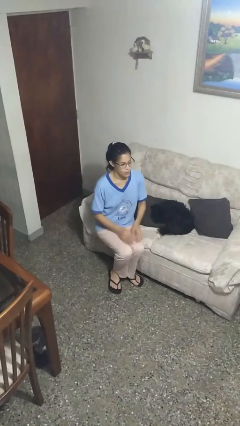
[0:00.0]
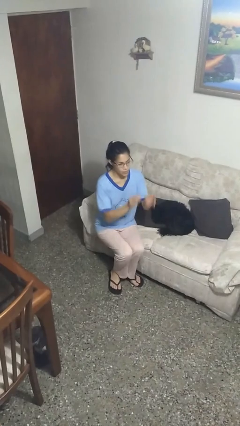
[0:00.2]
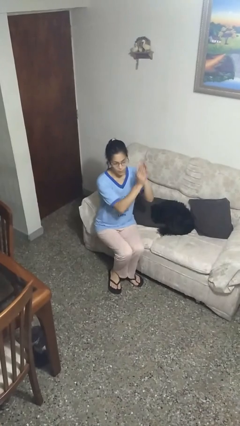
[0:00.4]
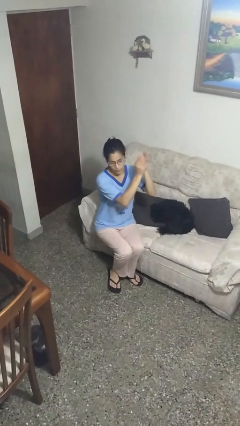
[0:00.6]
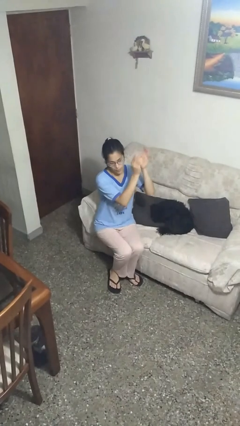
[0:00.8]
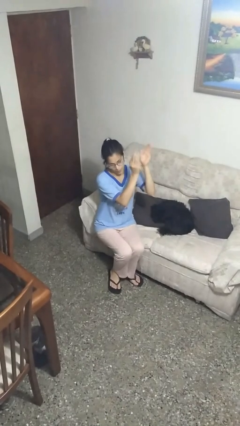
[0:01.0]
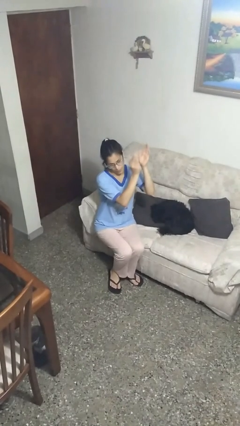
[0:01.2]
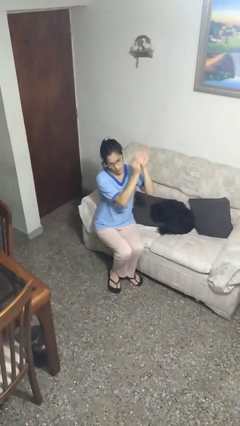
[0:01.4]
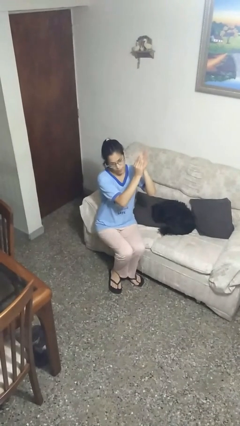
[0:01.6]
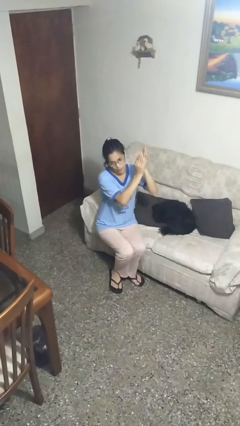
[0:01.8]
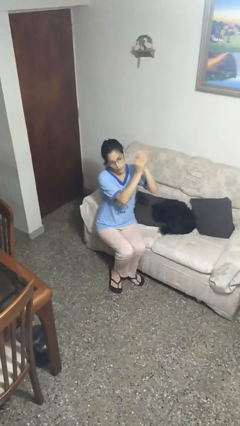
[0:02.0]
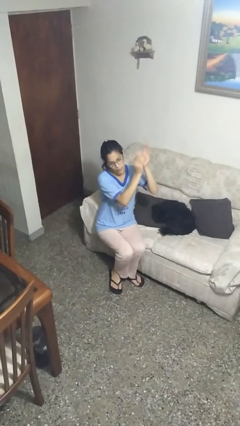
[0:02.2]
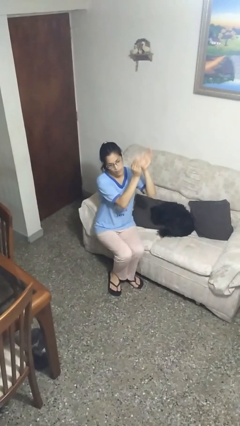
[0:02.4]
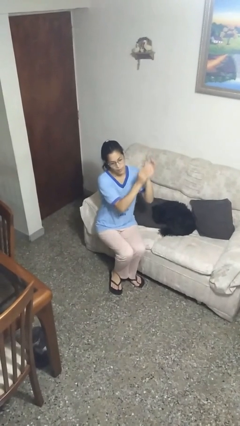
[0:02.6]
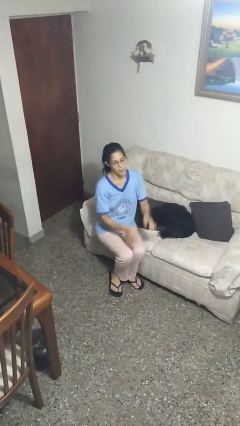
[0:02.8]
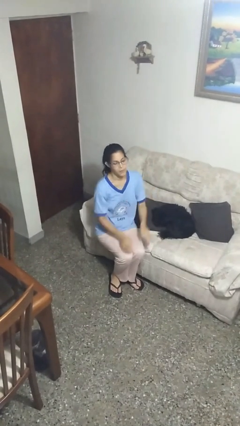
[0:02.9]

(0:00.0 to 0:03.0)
person claps hands

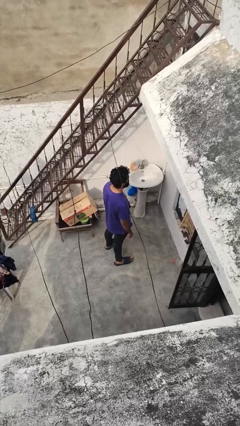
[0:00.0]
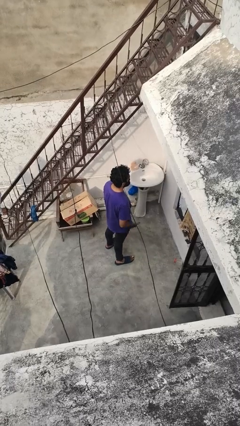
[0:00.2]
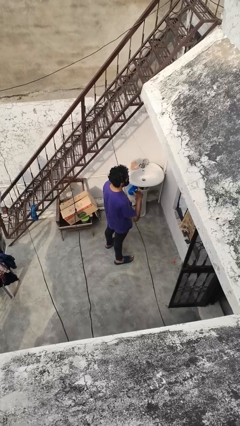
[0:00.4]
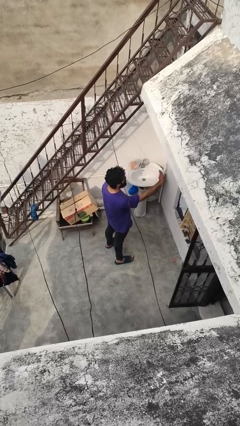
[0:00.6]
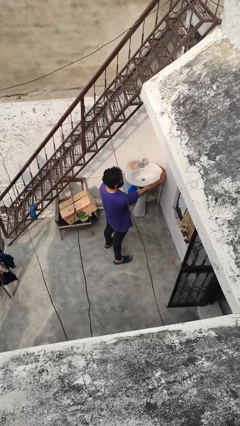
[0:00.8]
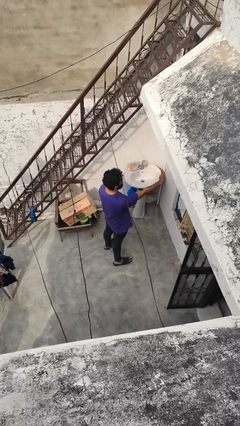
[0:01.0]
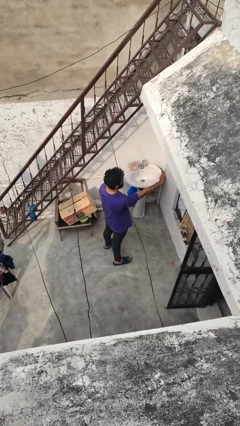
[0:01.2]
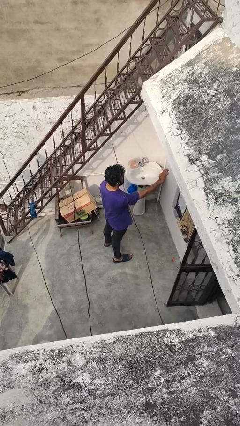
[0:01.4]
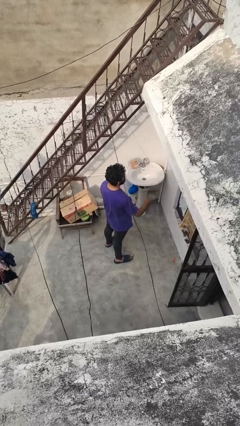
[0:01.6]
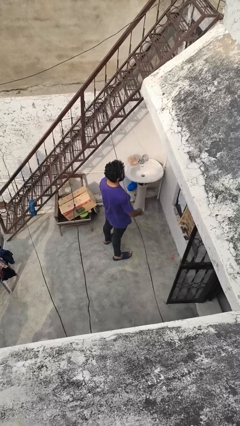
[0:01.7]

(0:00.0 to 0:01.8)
person gestures stop

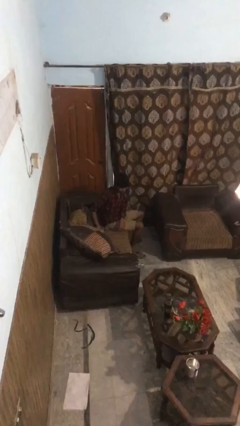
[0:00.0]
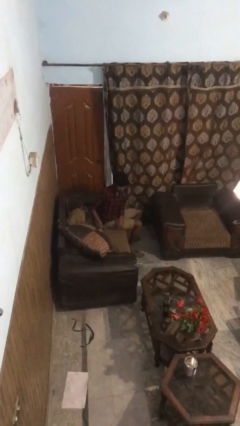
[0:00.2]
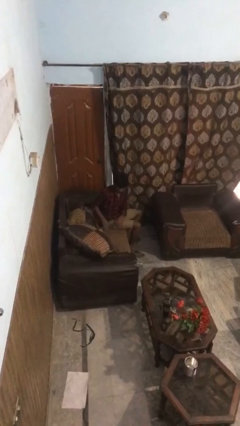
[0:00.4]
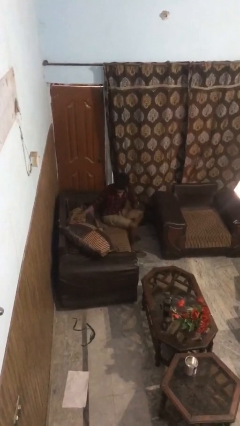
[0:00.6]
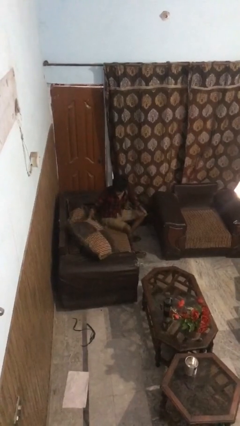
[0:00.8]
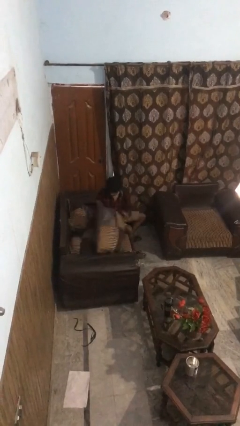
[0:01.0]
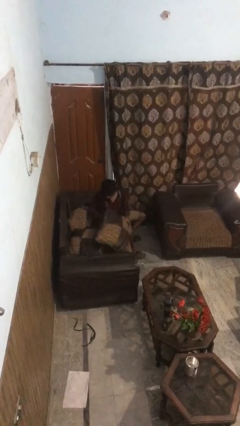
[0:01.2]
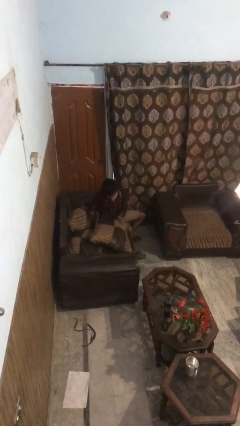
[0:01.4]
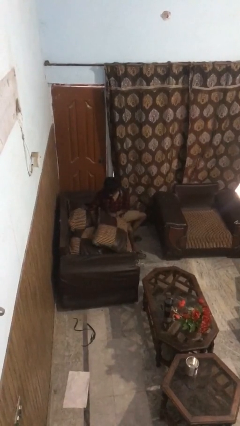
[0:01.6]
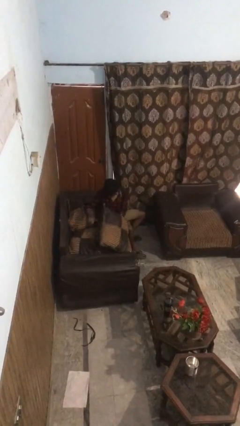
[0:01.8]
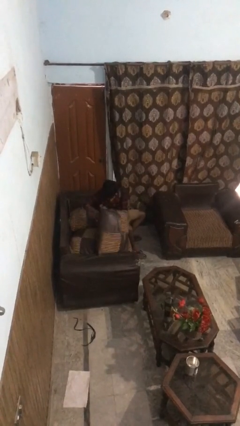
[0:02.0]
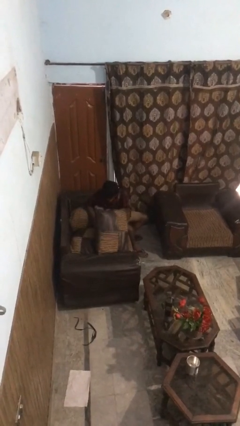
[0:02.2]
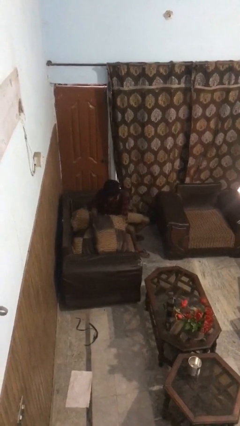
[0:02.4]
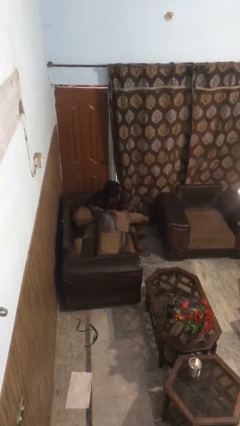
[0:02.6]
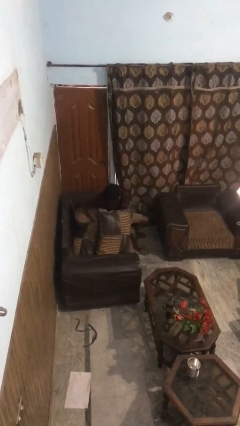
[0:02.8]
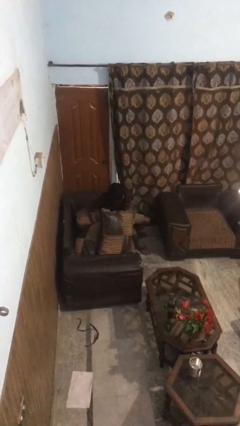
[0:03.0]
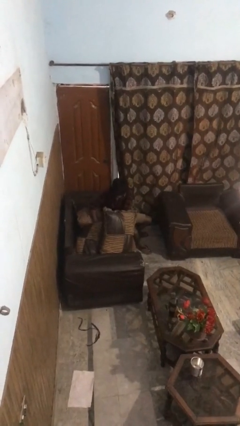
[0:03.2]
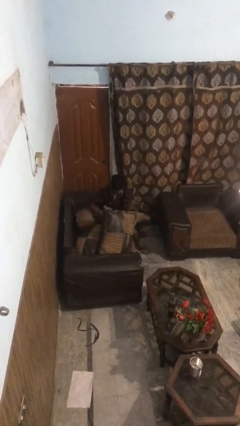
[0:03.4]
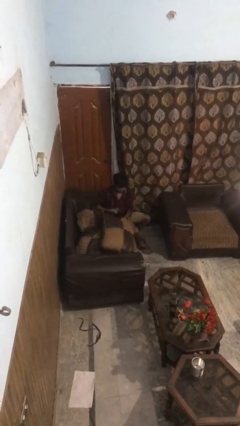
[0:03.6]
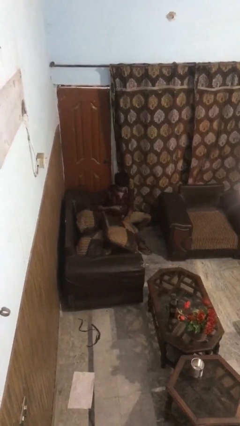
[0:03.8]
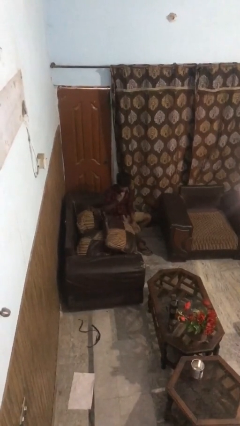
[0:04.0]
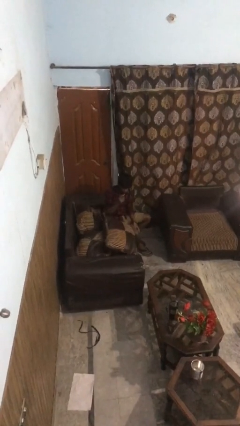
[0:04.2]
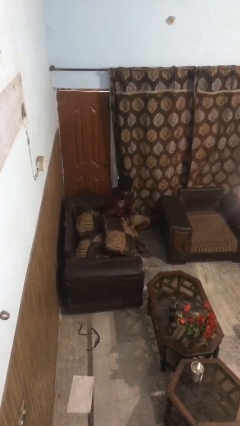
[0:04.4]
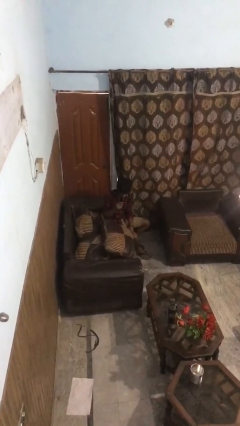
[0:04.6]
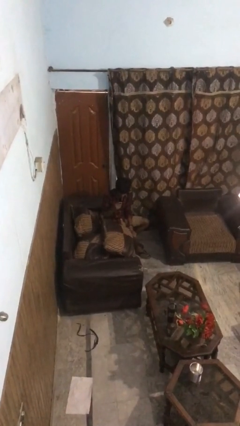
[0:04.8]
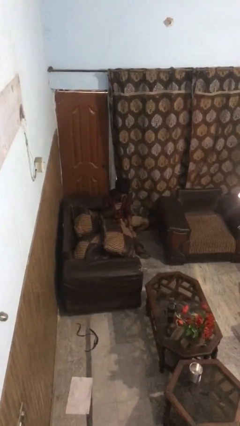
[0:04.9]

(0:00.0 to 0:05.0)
person searches in couch

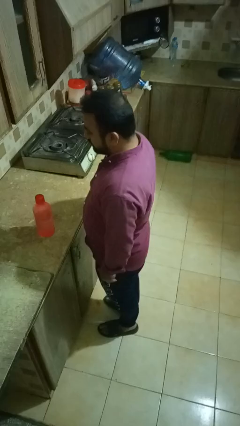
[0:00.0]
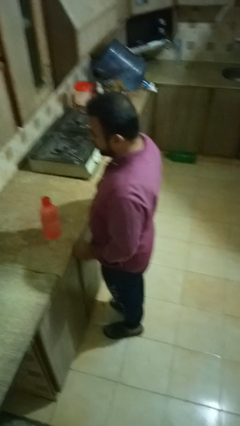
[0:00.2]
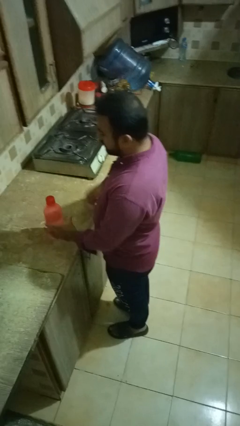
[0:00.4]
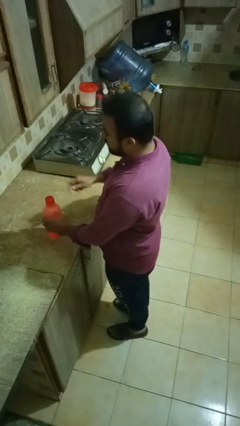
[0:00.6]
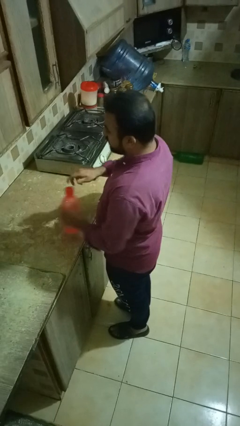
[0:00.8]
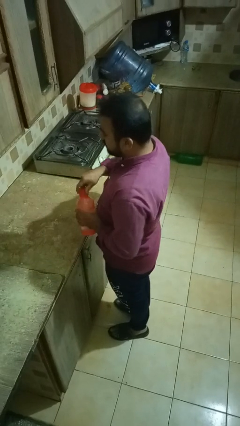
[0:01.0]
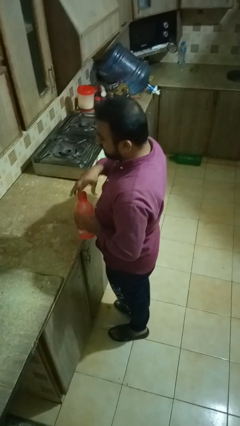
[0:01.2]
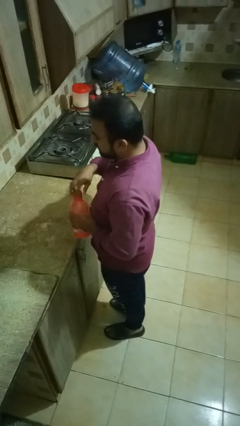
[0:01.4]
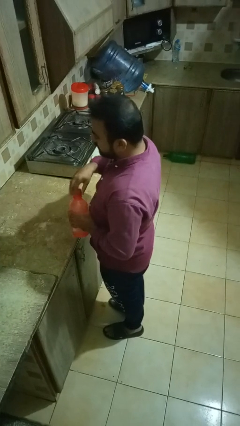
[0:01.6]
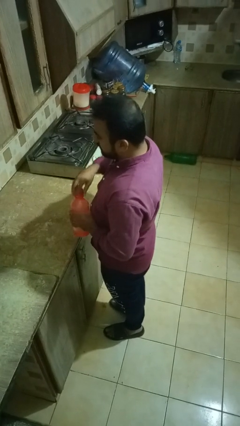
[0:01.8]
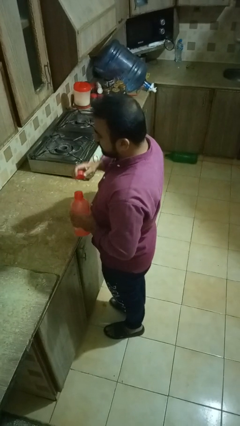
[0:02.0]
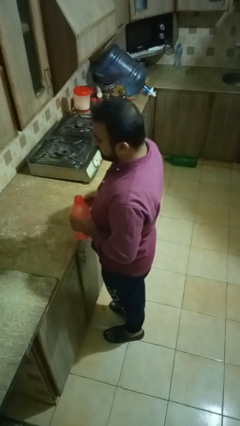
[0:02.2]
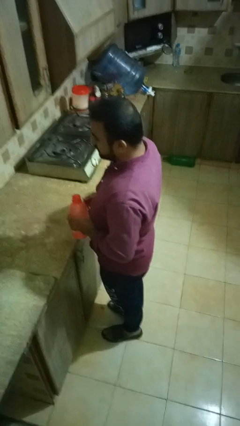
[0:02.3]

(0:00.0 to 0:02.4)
person unscrews lid from bottle

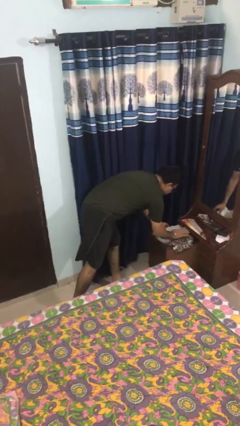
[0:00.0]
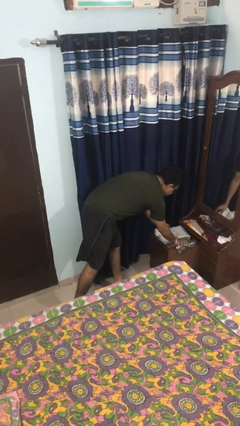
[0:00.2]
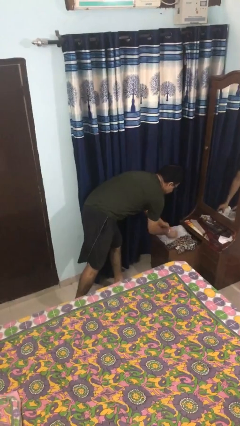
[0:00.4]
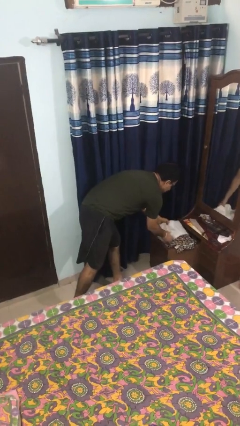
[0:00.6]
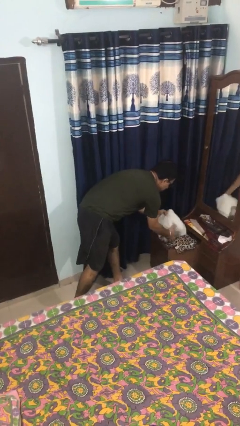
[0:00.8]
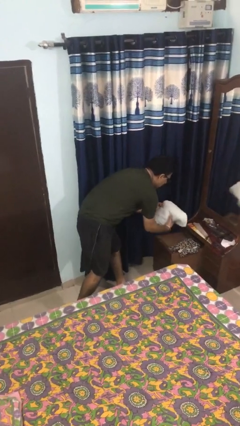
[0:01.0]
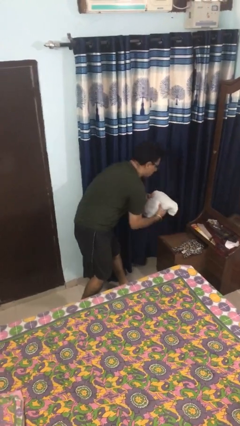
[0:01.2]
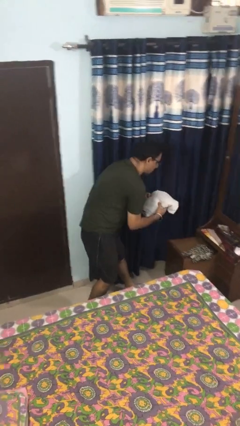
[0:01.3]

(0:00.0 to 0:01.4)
person takes clothes from dresser

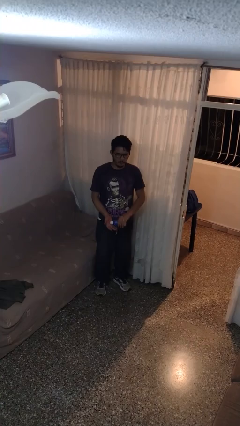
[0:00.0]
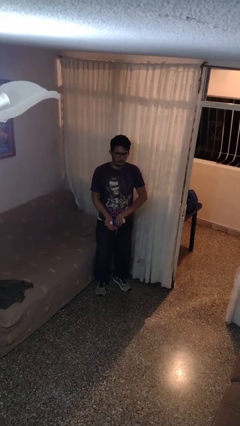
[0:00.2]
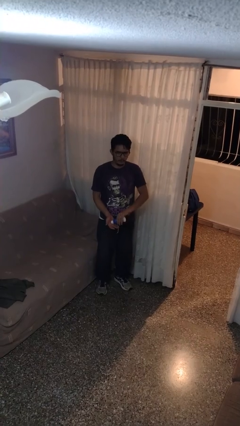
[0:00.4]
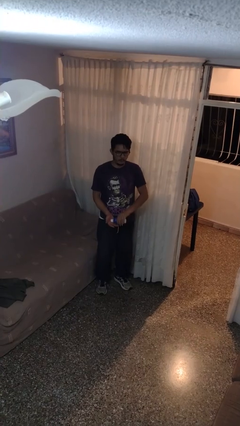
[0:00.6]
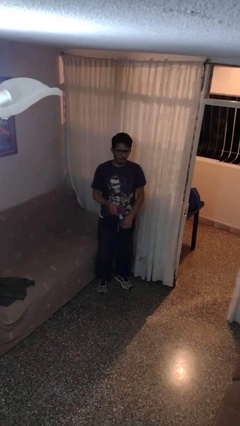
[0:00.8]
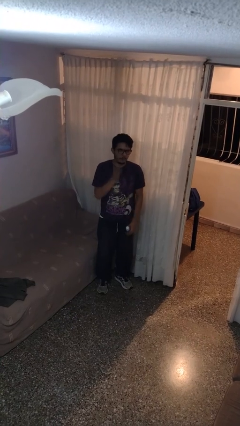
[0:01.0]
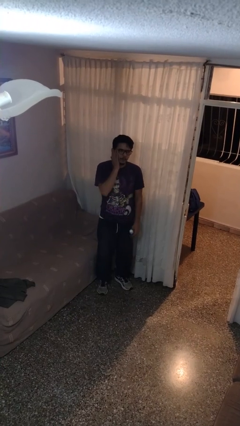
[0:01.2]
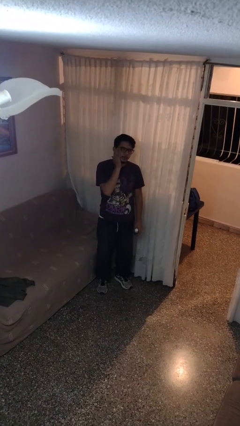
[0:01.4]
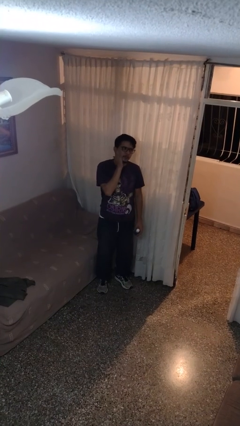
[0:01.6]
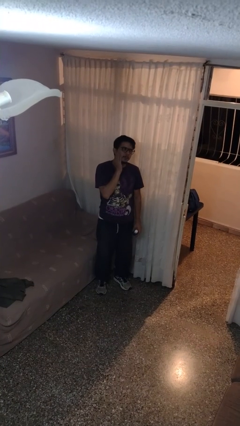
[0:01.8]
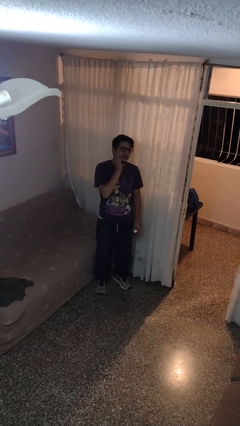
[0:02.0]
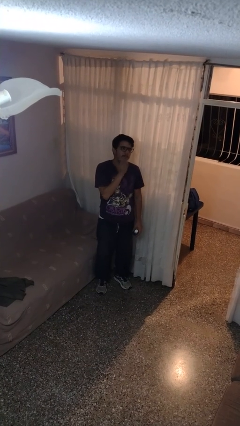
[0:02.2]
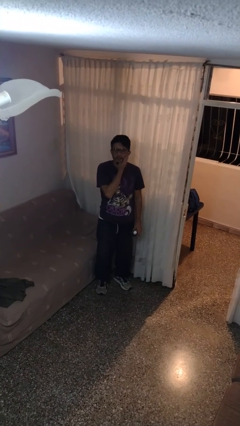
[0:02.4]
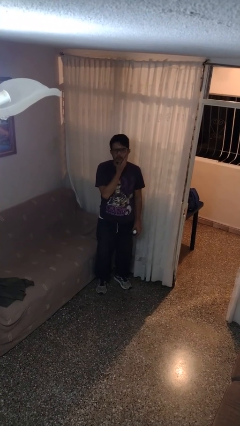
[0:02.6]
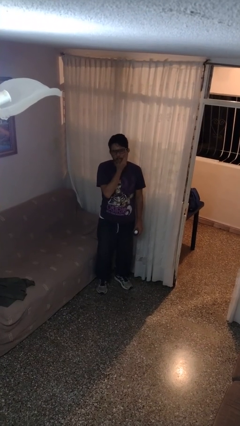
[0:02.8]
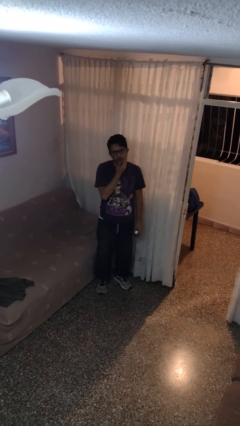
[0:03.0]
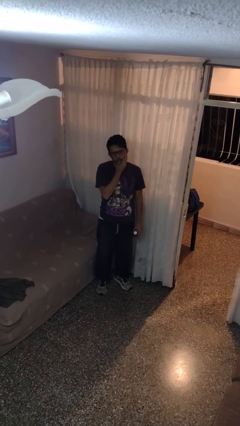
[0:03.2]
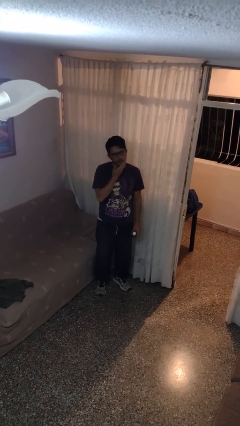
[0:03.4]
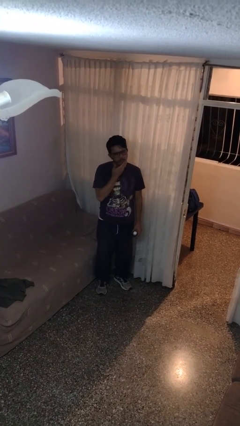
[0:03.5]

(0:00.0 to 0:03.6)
person applies sunscreen
